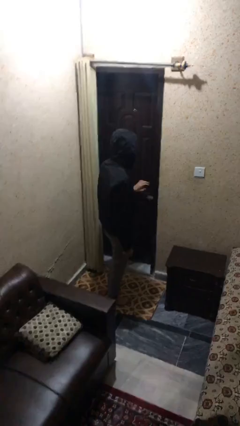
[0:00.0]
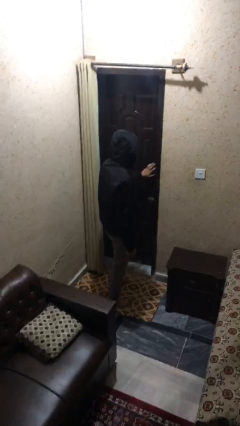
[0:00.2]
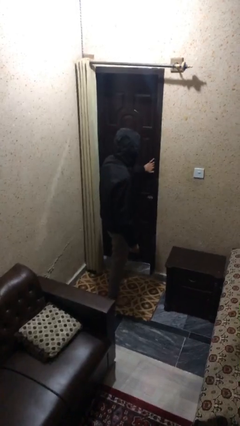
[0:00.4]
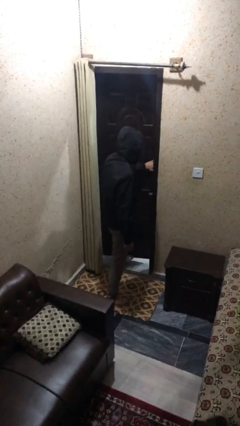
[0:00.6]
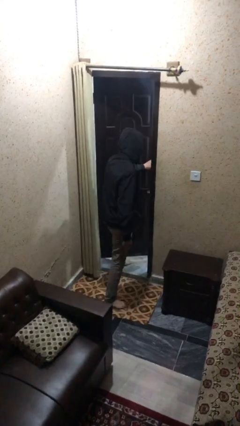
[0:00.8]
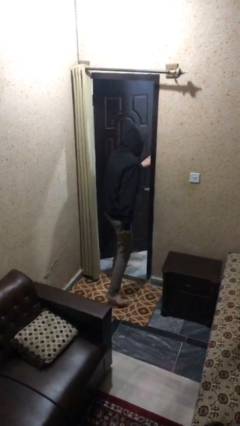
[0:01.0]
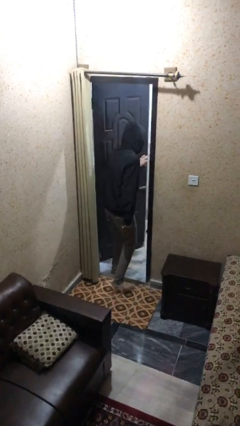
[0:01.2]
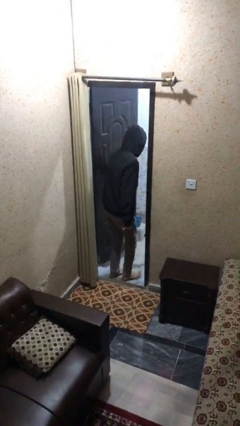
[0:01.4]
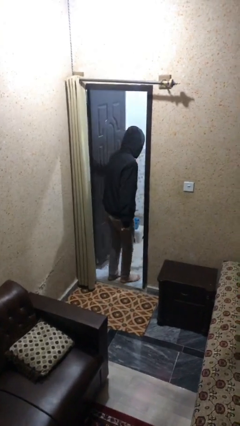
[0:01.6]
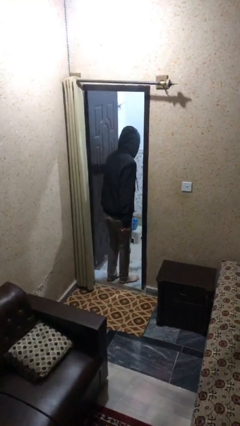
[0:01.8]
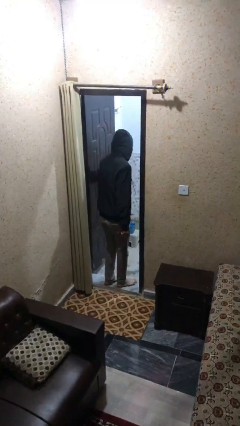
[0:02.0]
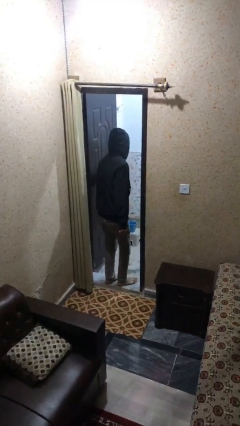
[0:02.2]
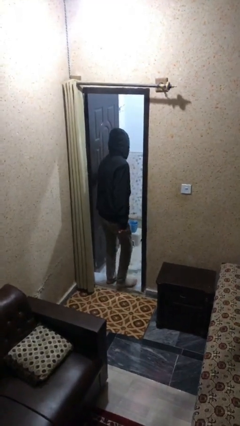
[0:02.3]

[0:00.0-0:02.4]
person opens facility door

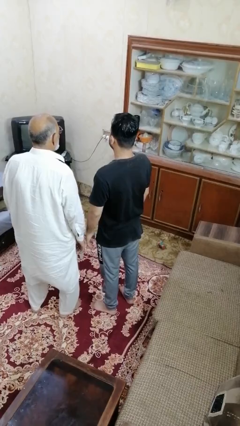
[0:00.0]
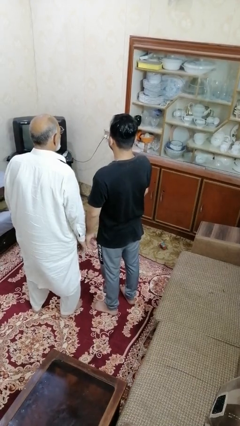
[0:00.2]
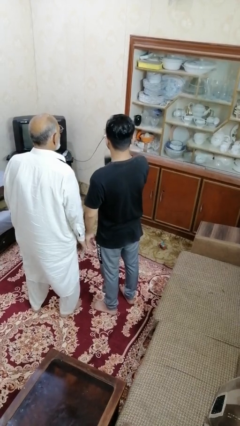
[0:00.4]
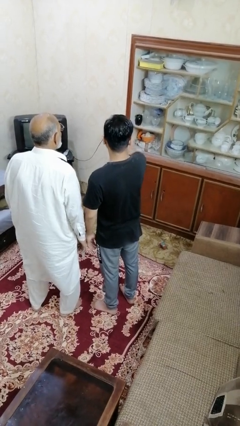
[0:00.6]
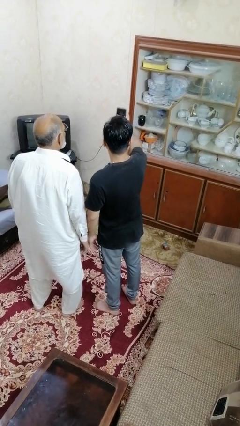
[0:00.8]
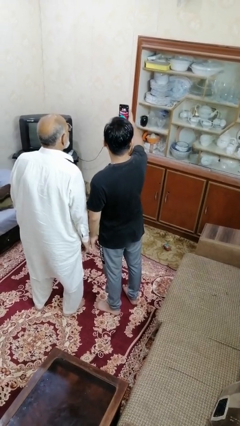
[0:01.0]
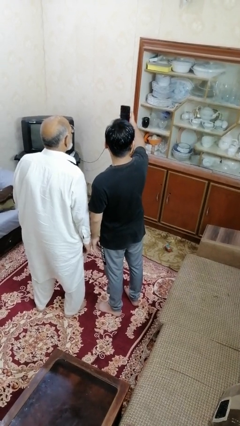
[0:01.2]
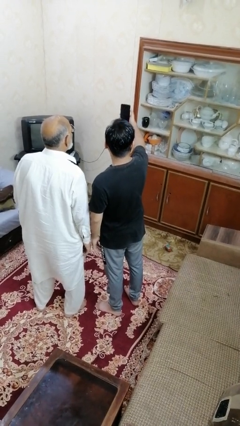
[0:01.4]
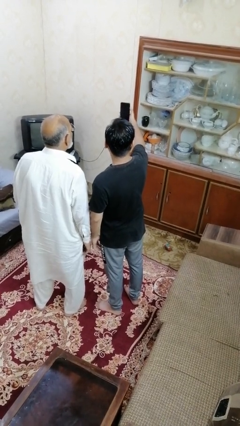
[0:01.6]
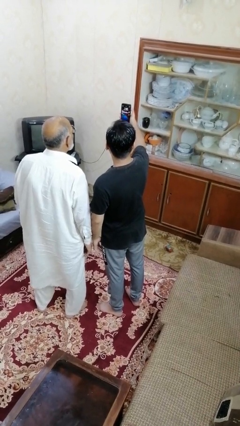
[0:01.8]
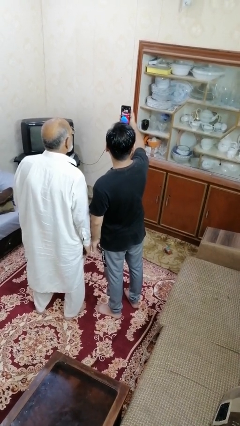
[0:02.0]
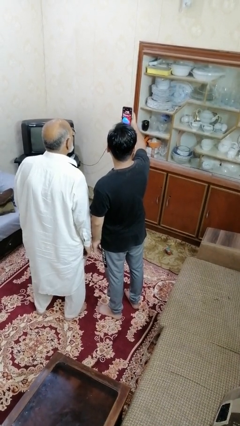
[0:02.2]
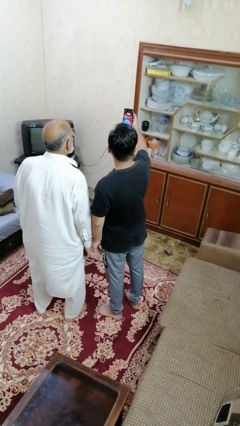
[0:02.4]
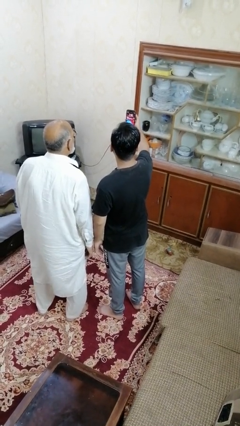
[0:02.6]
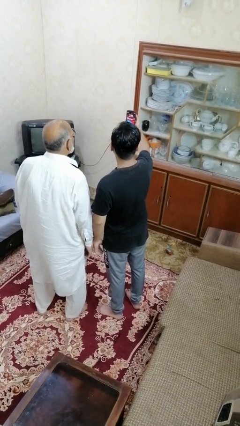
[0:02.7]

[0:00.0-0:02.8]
person takes selfie with person

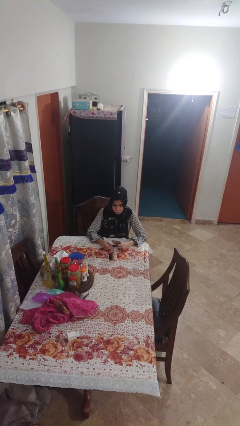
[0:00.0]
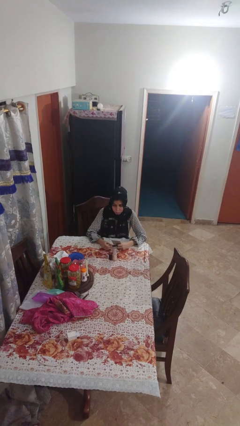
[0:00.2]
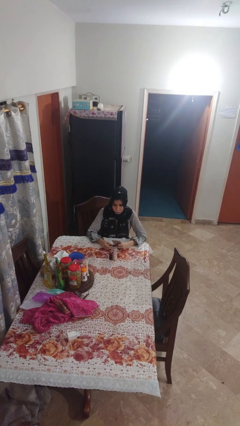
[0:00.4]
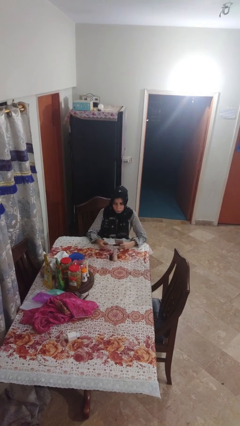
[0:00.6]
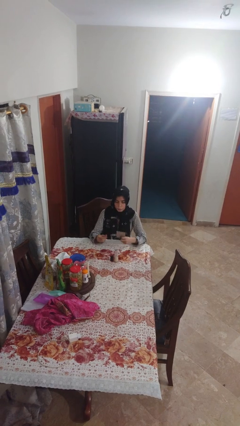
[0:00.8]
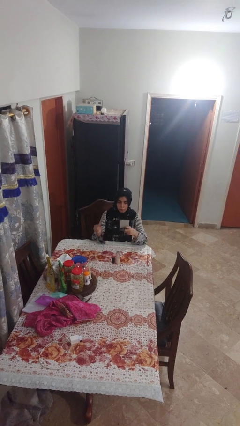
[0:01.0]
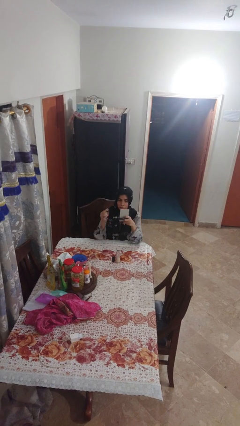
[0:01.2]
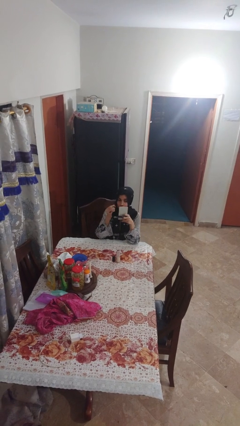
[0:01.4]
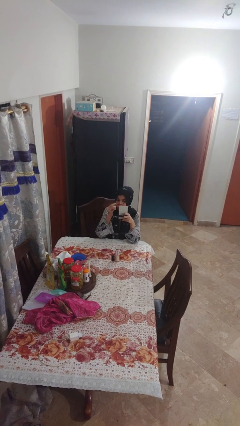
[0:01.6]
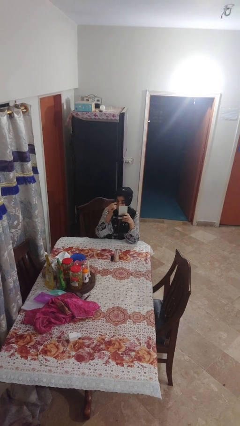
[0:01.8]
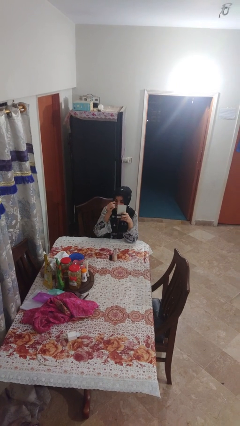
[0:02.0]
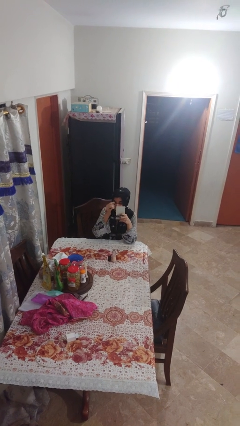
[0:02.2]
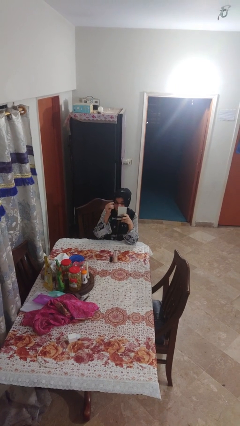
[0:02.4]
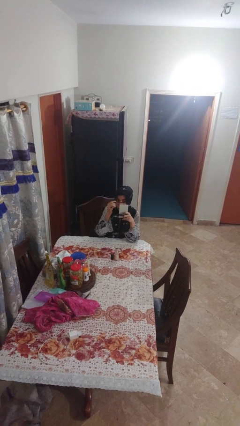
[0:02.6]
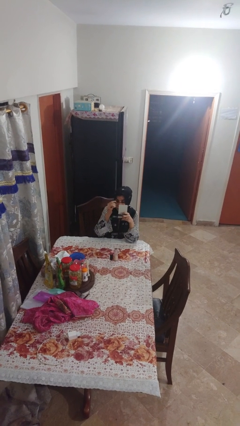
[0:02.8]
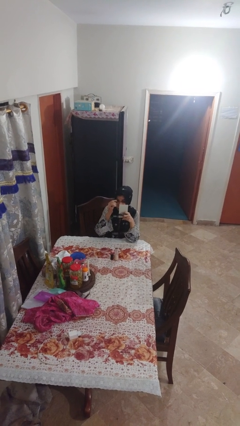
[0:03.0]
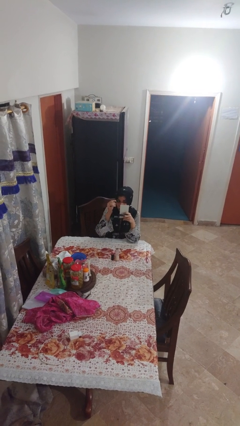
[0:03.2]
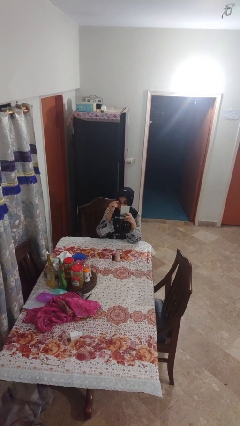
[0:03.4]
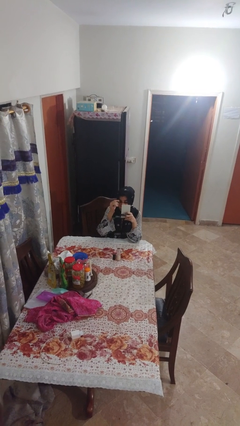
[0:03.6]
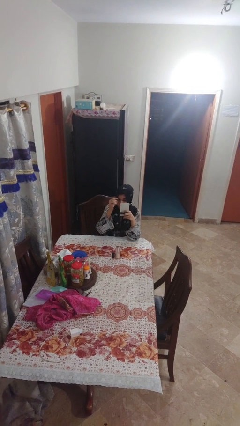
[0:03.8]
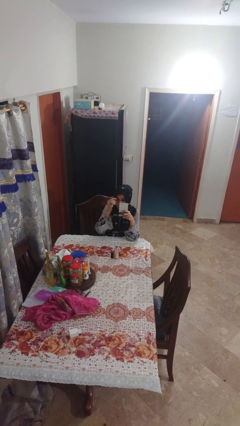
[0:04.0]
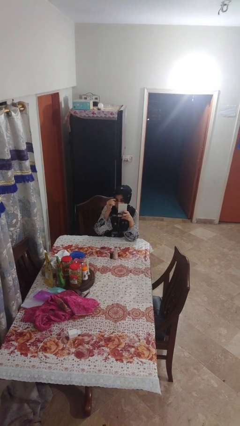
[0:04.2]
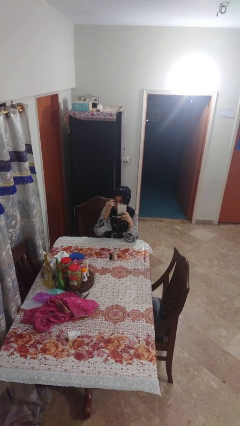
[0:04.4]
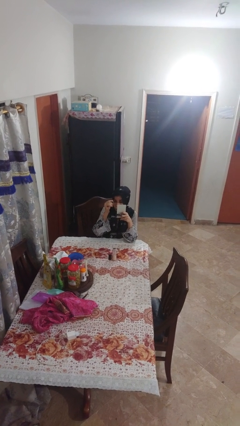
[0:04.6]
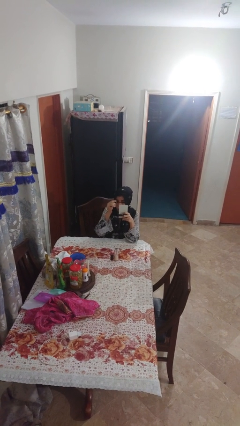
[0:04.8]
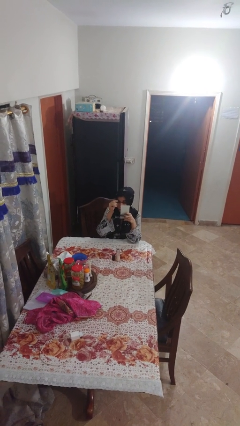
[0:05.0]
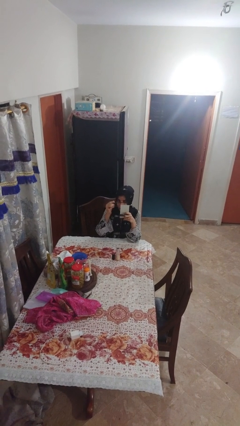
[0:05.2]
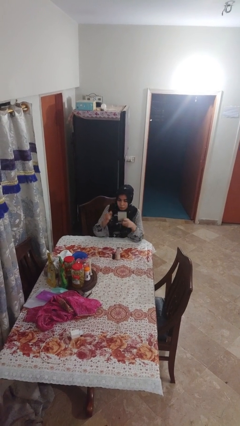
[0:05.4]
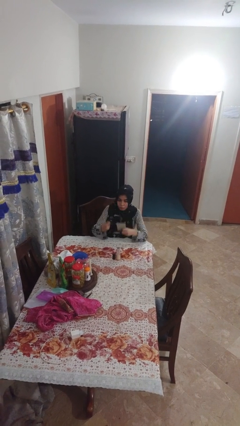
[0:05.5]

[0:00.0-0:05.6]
person applies eye makeup

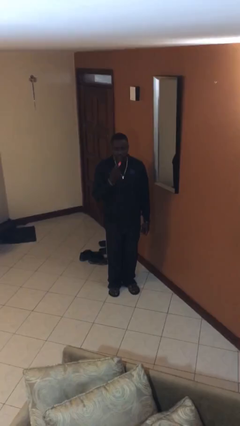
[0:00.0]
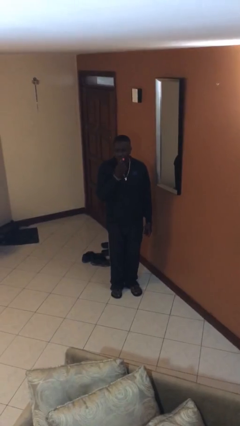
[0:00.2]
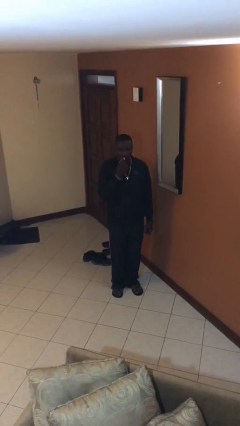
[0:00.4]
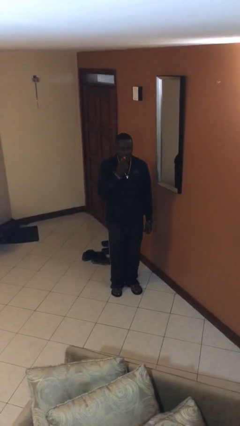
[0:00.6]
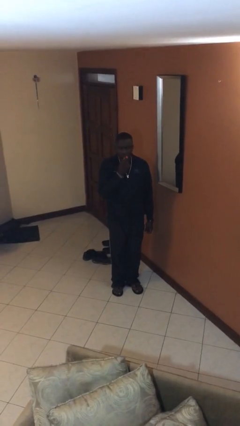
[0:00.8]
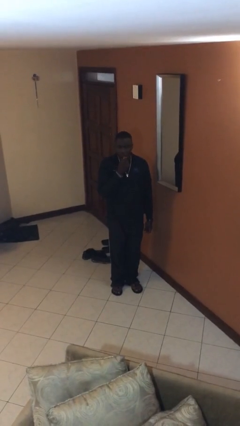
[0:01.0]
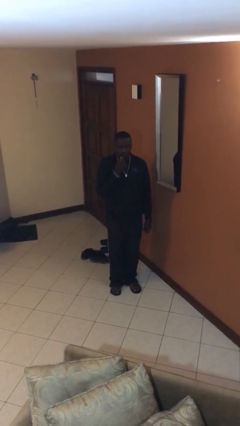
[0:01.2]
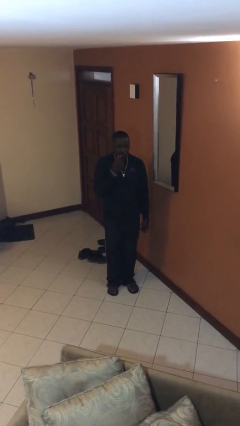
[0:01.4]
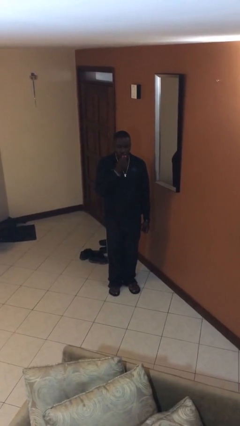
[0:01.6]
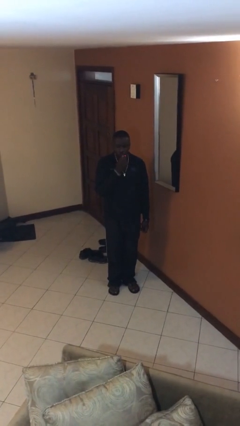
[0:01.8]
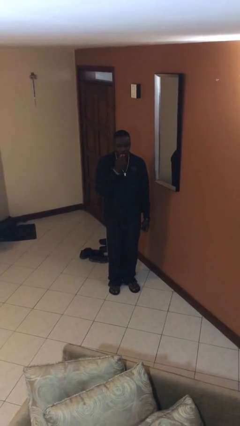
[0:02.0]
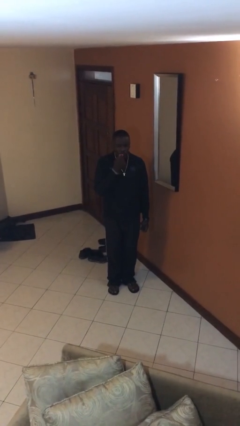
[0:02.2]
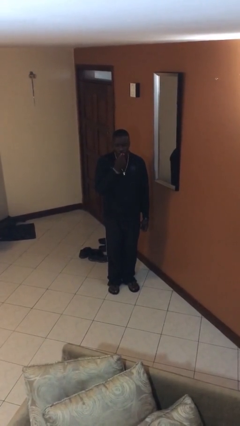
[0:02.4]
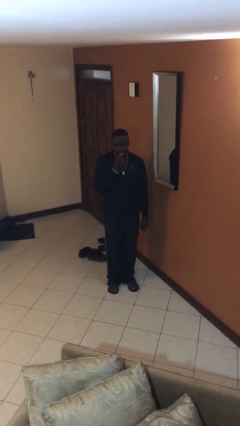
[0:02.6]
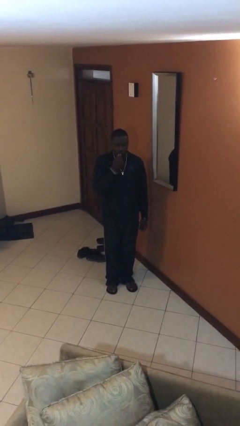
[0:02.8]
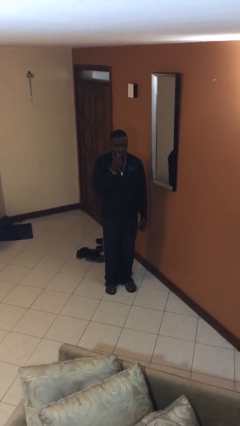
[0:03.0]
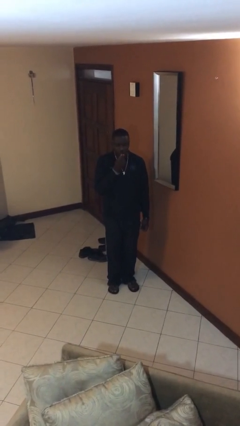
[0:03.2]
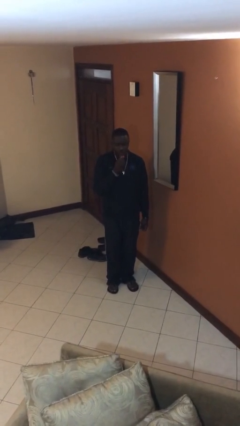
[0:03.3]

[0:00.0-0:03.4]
person applies lip makeup

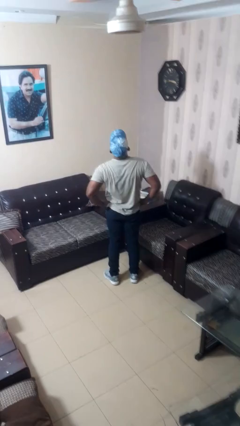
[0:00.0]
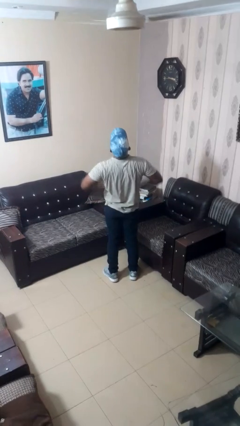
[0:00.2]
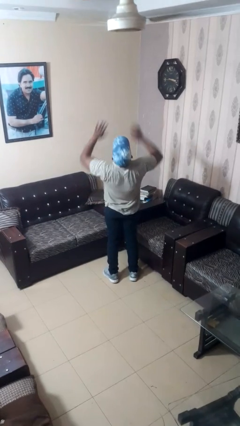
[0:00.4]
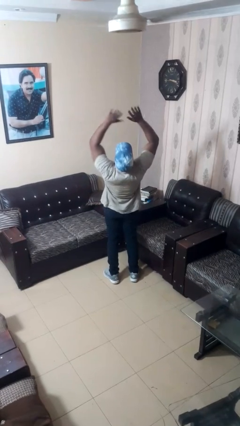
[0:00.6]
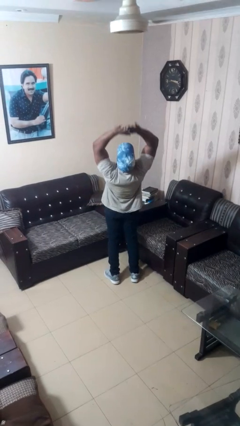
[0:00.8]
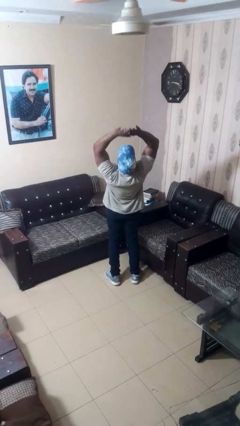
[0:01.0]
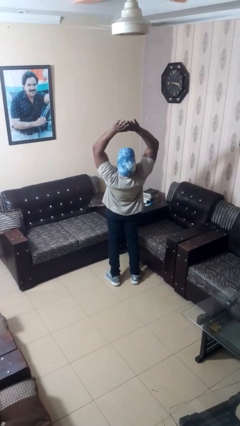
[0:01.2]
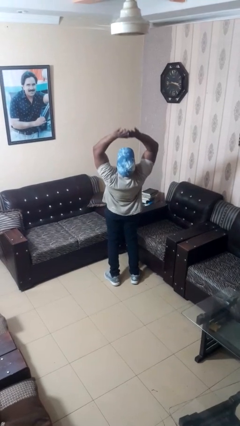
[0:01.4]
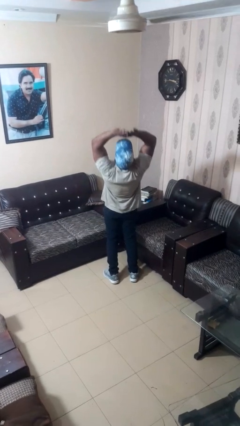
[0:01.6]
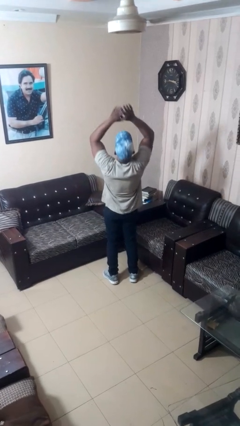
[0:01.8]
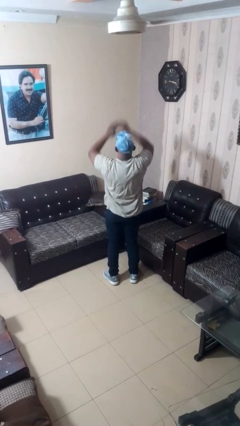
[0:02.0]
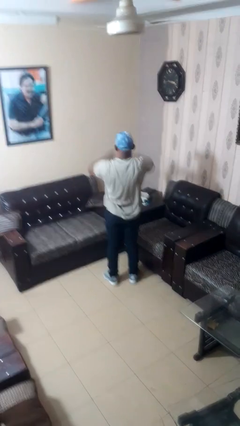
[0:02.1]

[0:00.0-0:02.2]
person stretches arms over head

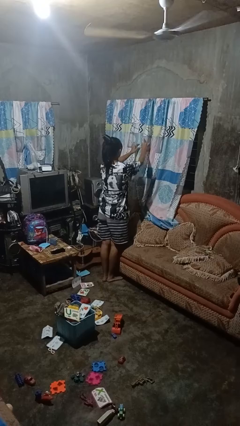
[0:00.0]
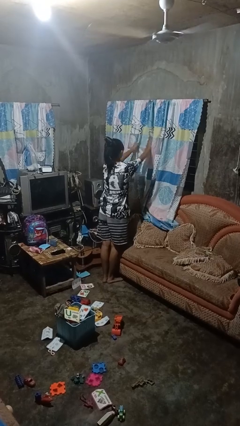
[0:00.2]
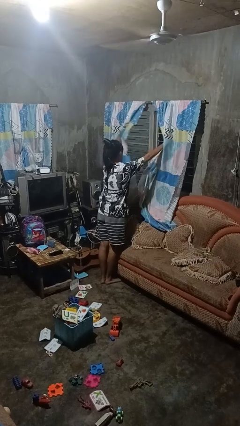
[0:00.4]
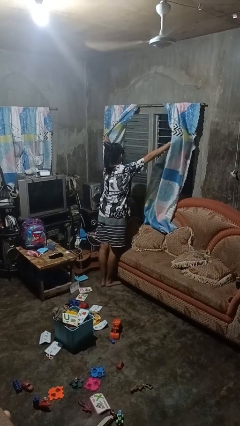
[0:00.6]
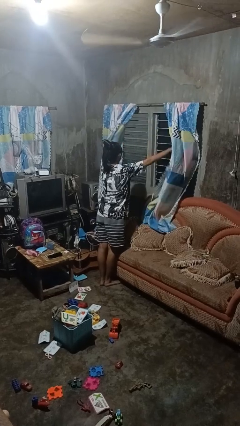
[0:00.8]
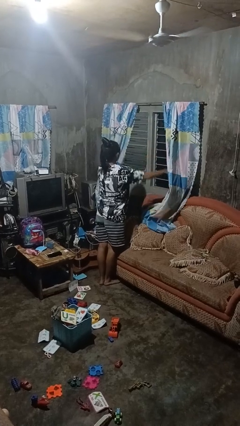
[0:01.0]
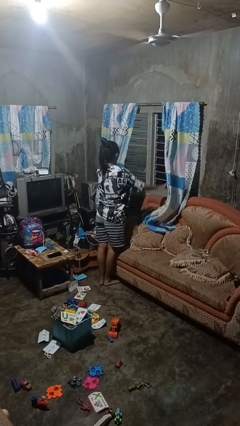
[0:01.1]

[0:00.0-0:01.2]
person opens curtains
